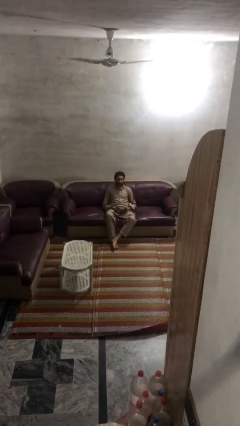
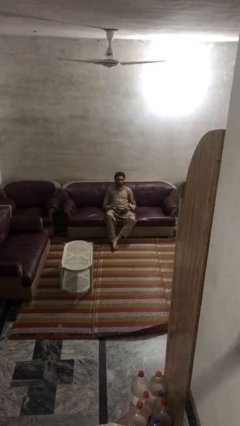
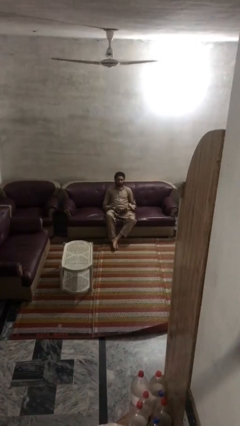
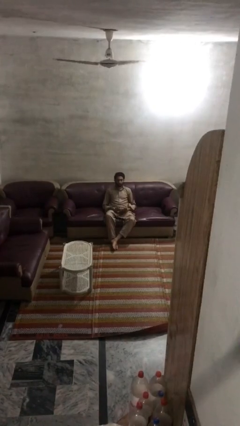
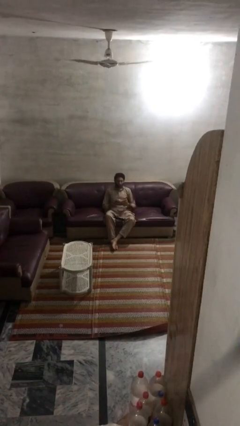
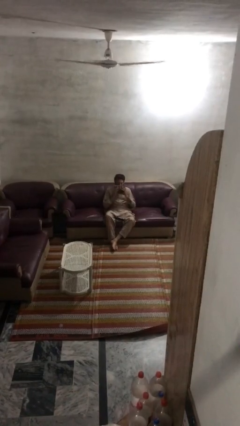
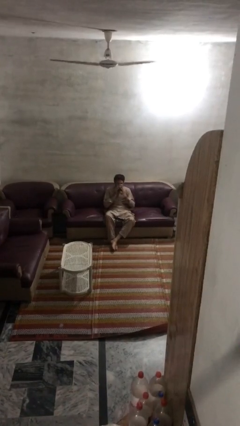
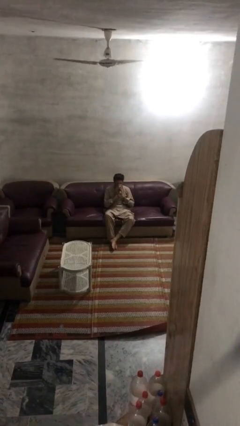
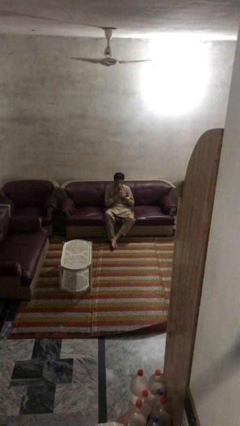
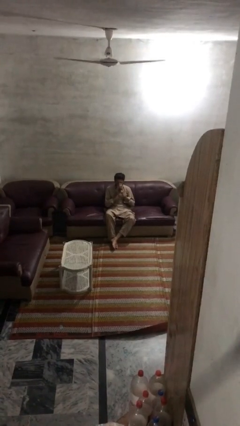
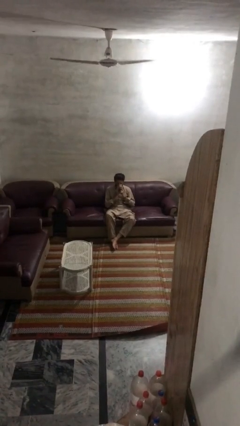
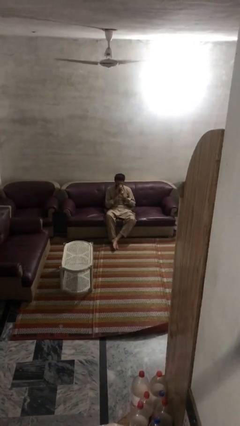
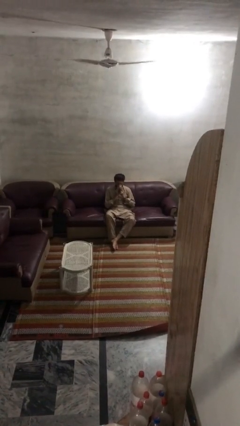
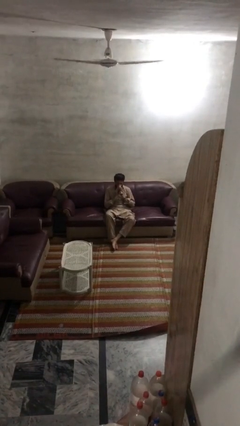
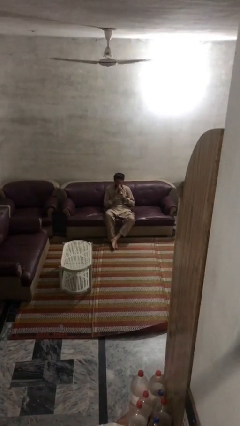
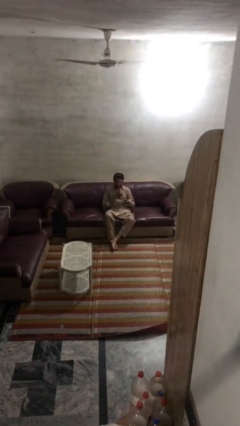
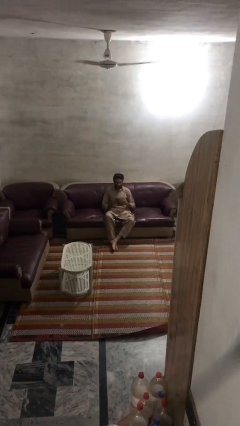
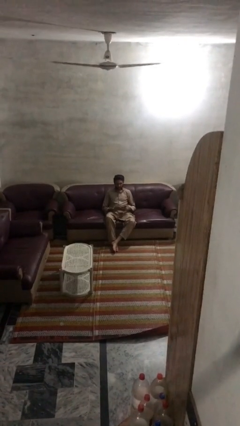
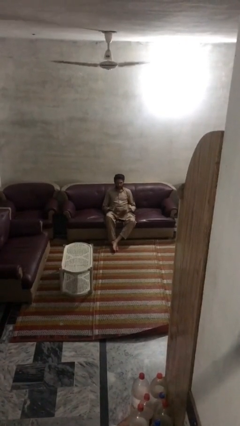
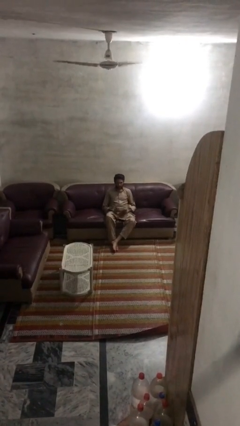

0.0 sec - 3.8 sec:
person blows nose

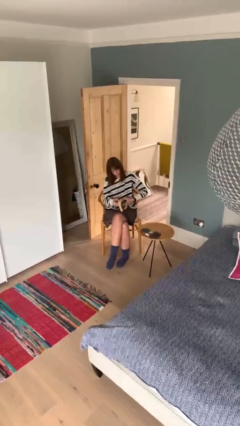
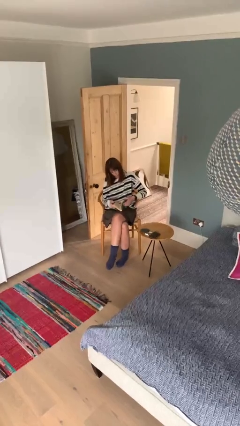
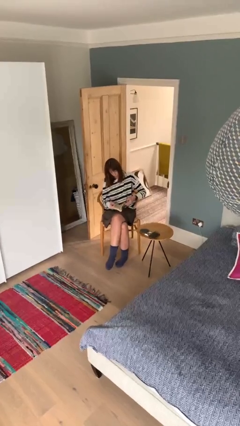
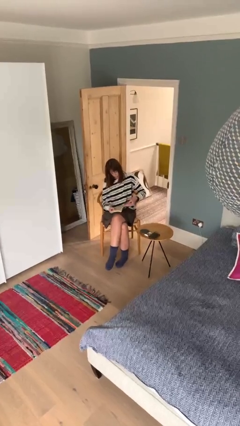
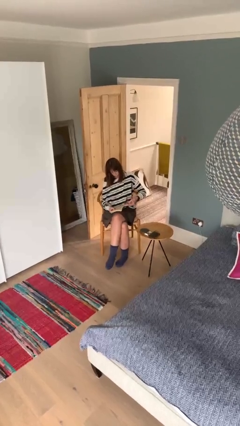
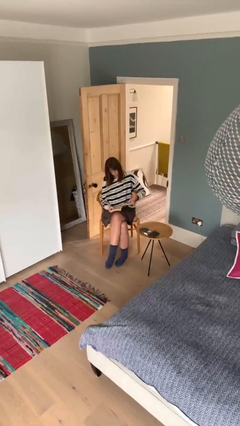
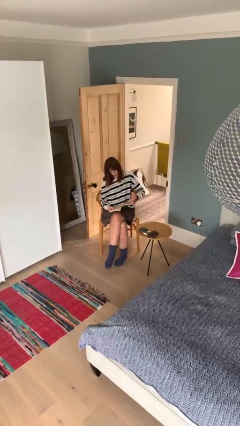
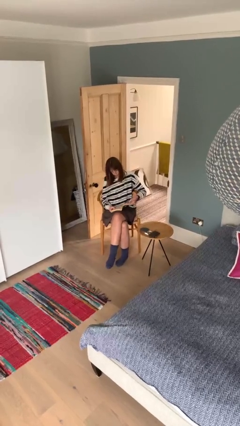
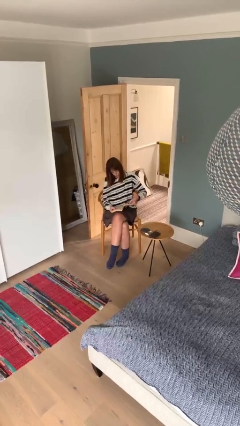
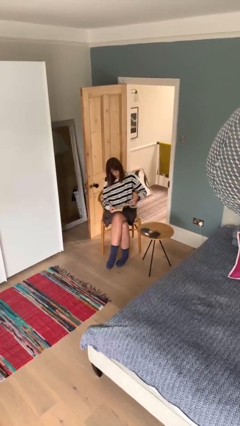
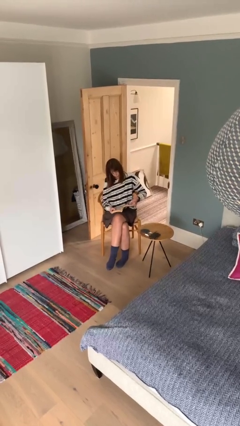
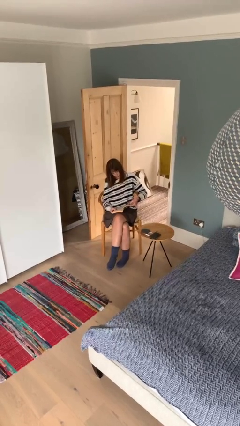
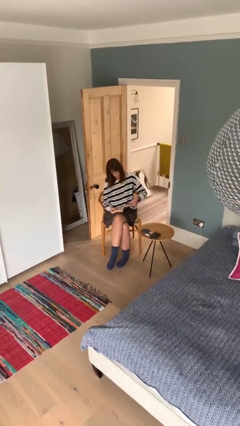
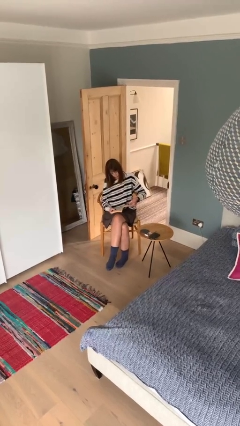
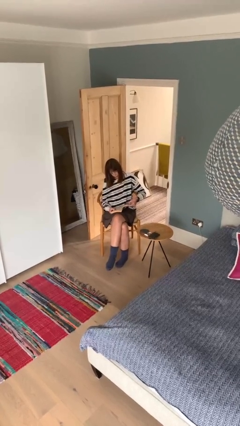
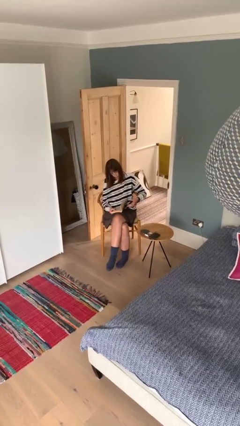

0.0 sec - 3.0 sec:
person reads document

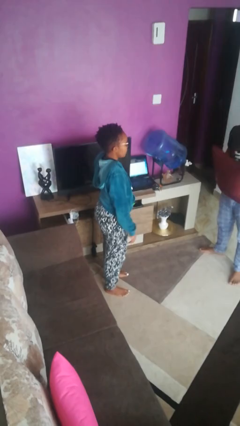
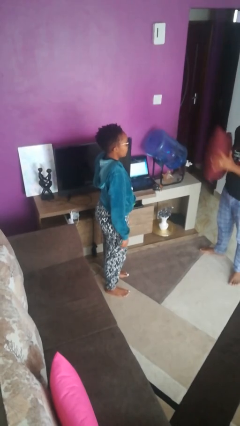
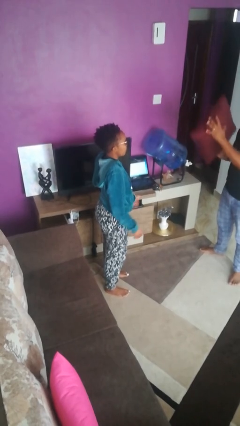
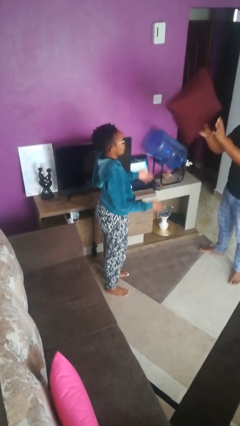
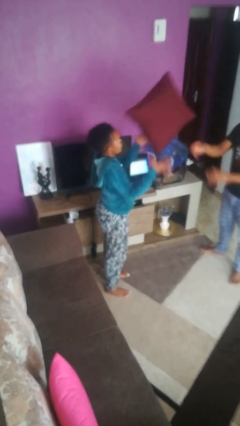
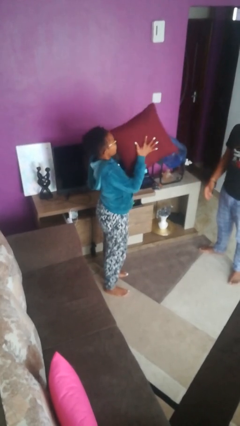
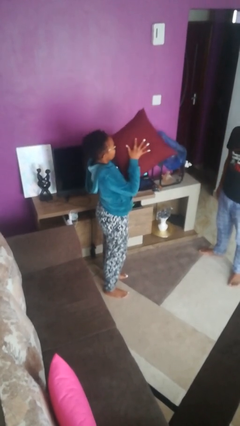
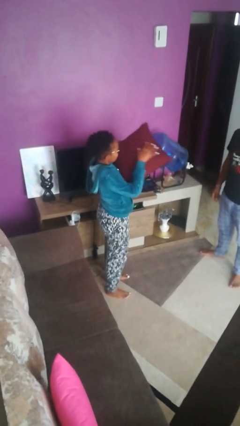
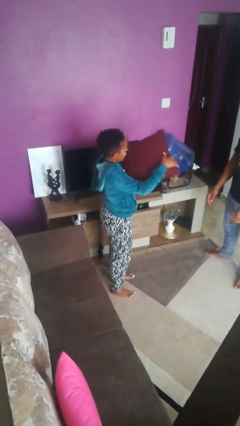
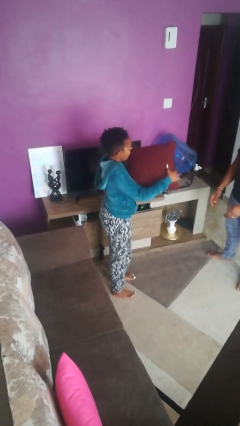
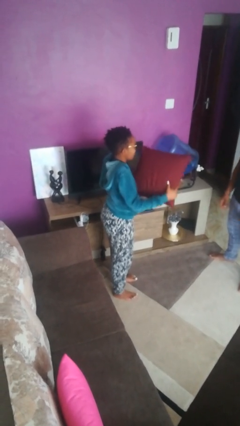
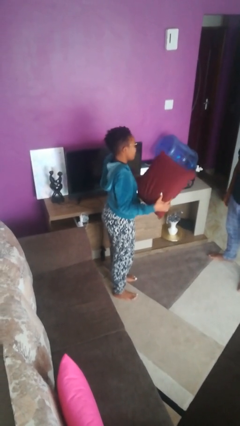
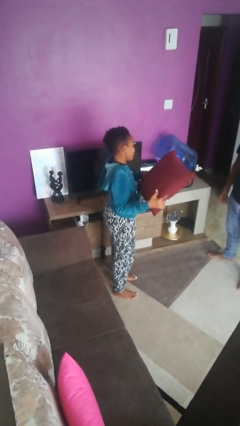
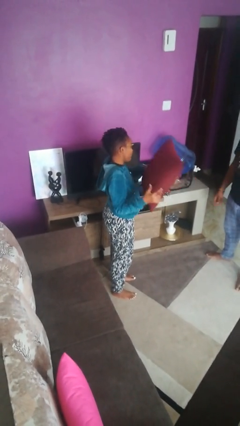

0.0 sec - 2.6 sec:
person catches object from person

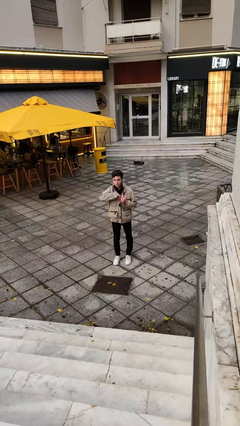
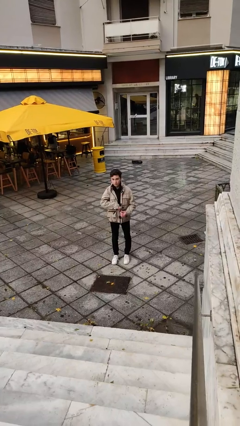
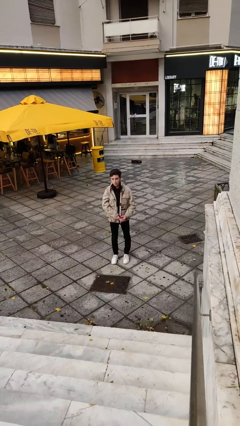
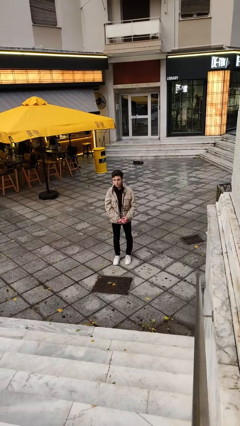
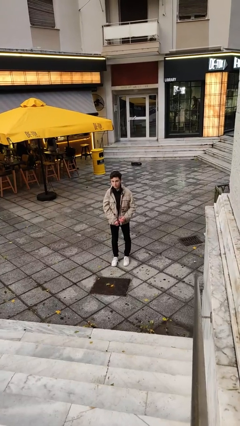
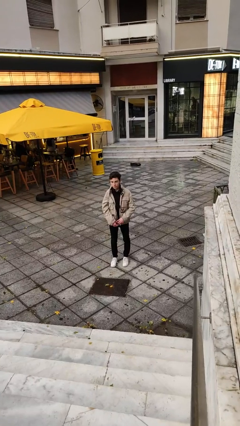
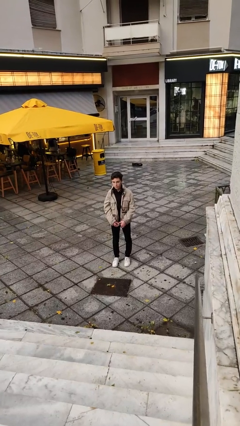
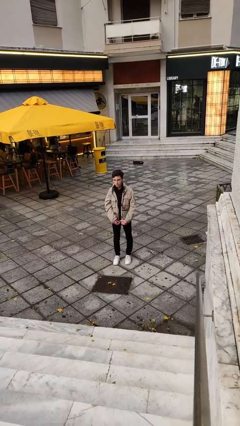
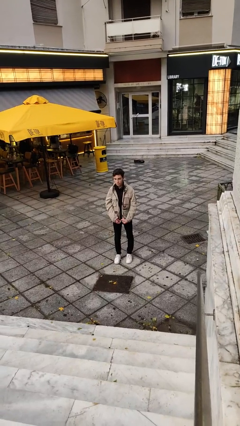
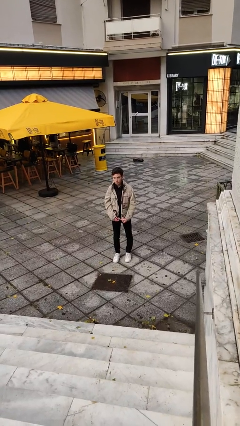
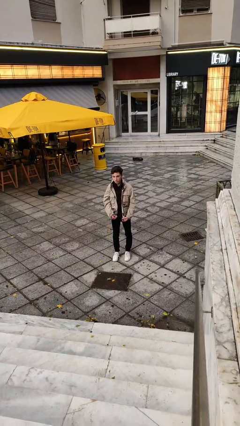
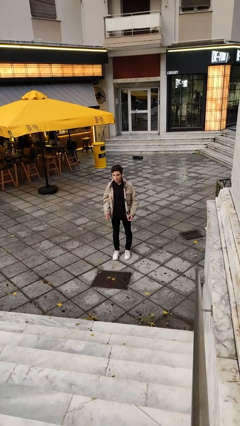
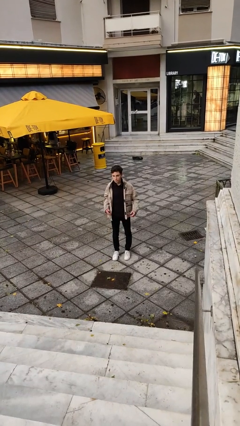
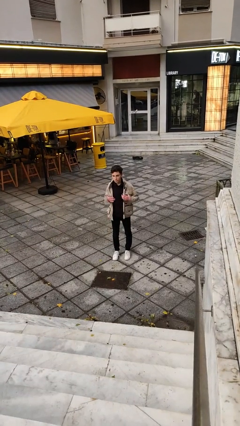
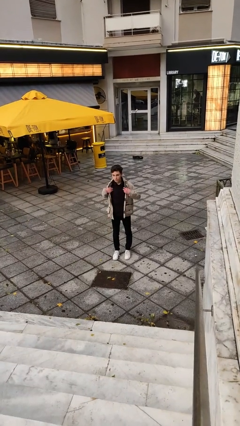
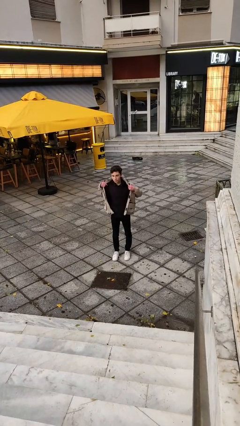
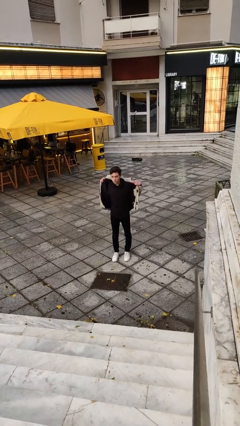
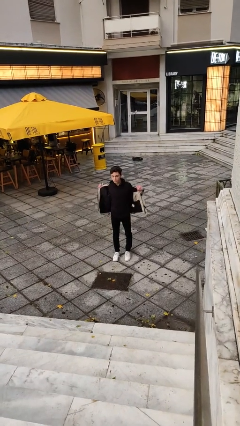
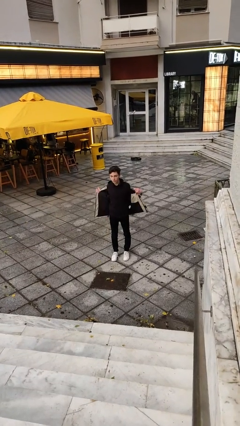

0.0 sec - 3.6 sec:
person unzips jacket

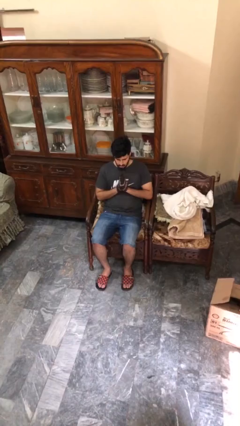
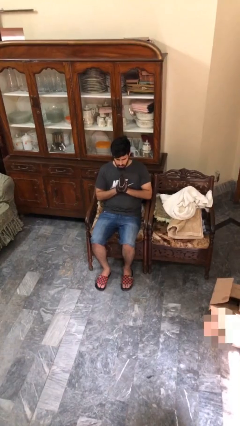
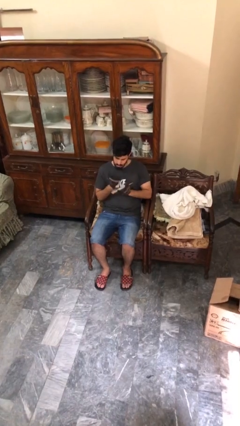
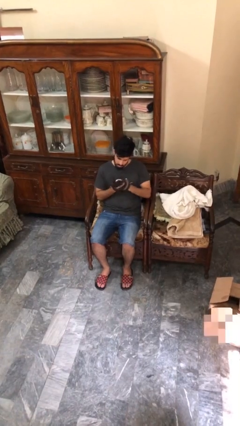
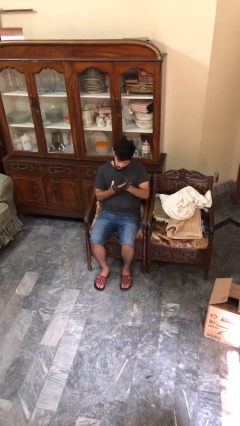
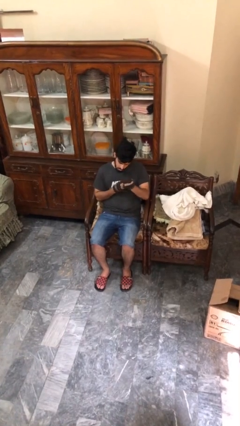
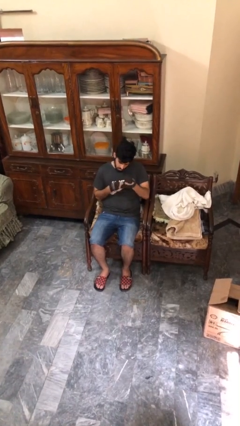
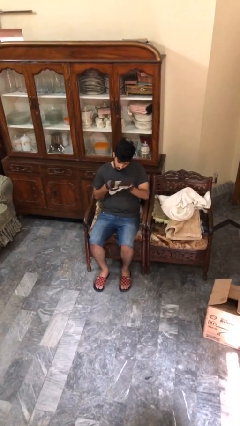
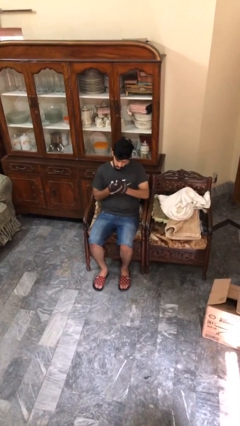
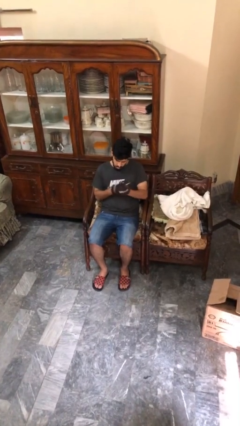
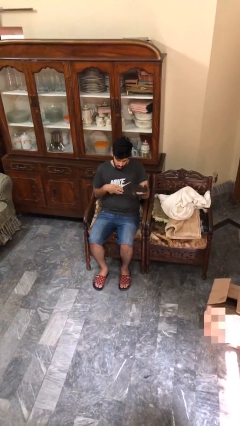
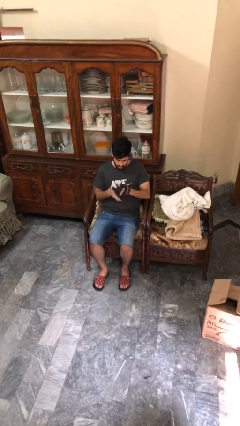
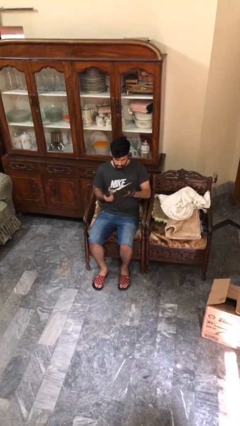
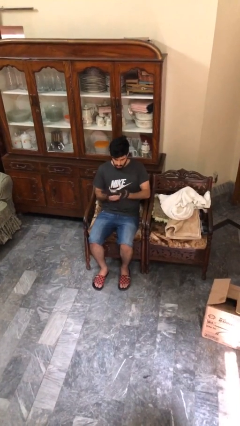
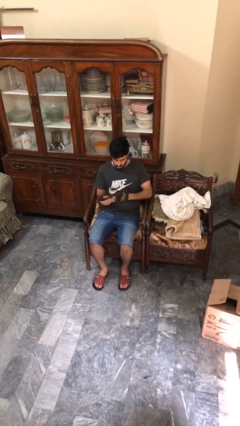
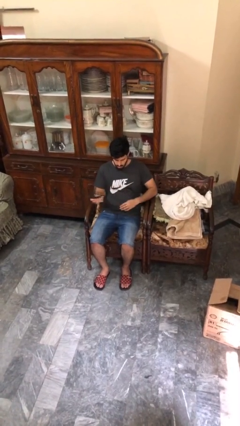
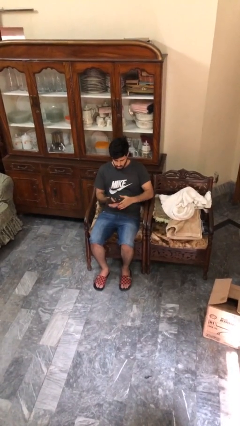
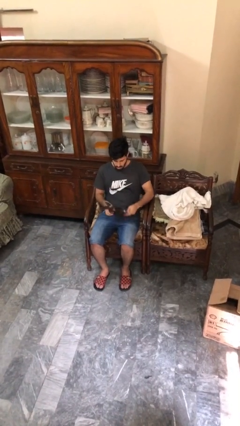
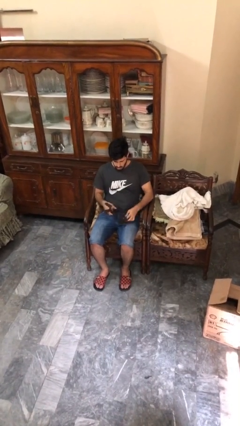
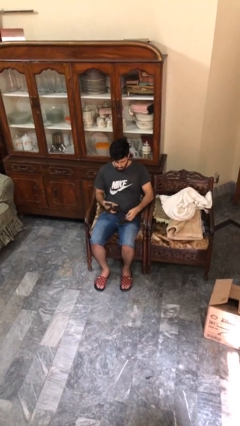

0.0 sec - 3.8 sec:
person takes off gloves

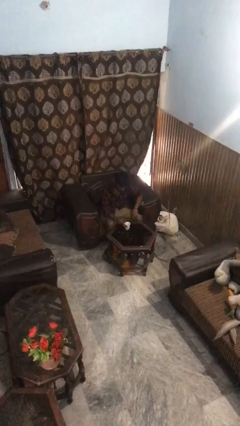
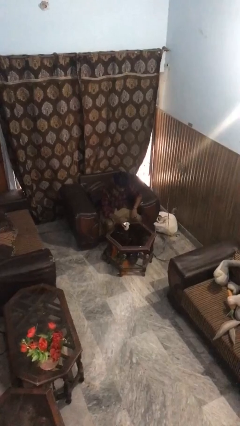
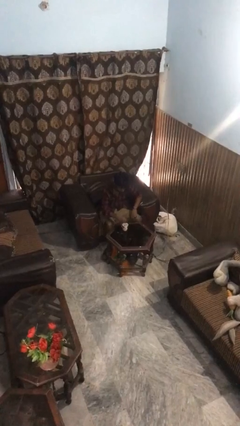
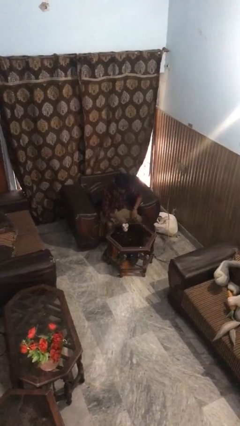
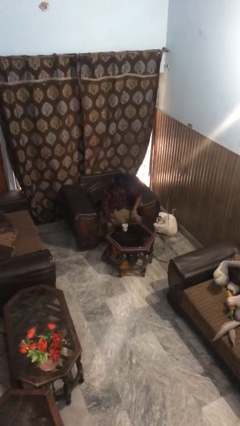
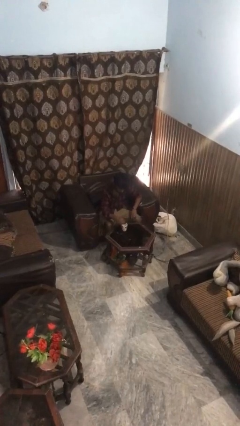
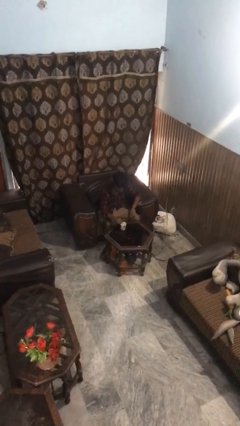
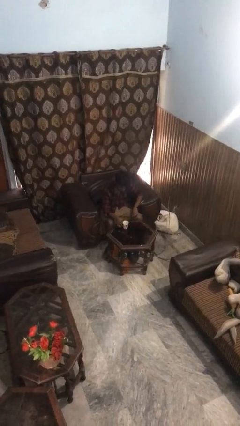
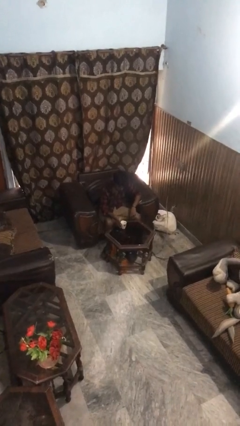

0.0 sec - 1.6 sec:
person stirs mug
